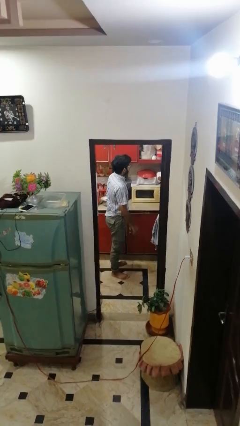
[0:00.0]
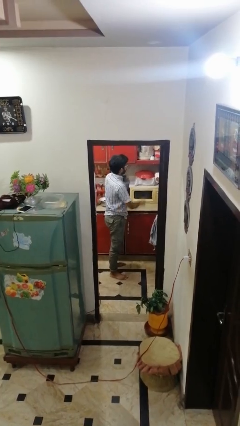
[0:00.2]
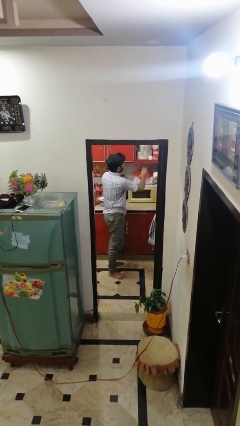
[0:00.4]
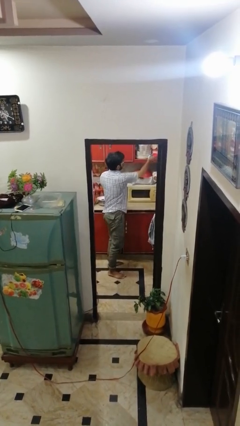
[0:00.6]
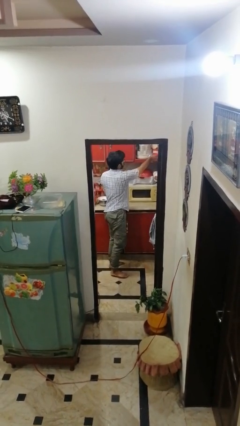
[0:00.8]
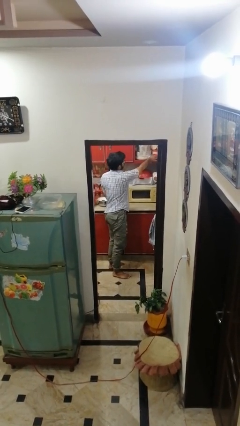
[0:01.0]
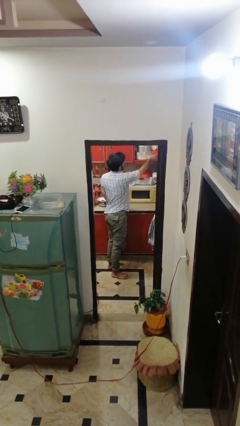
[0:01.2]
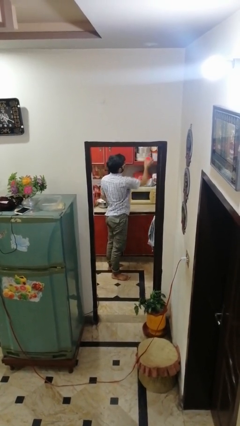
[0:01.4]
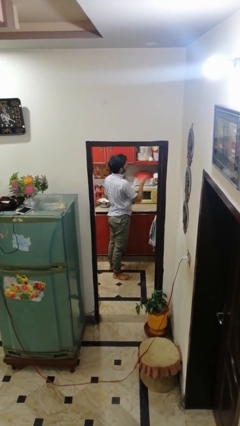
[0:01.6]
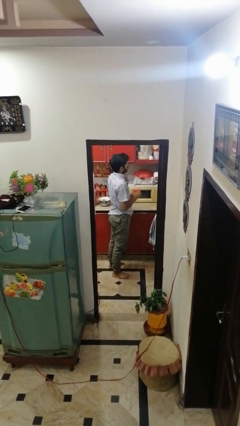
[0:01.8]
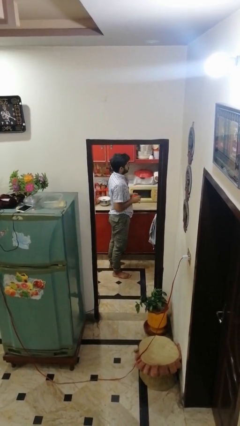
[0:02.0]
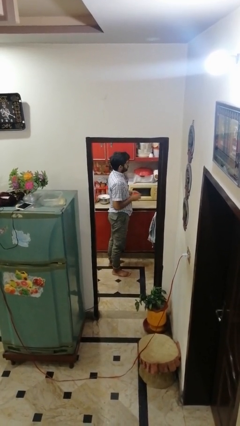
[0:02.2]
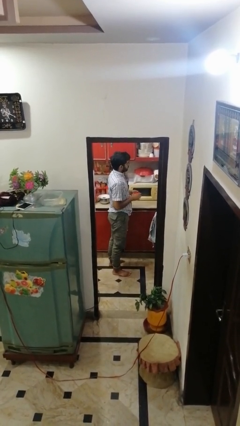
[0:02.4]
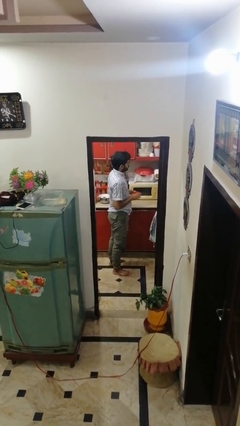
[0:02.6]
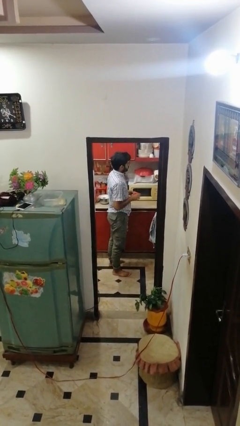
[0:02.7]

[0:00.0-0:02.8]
person picks up object from cabinet

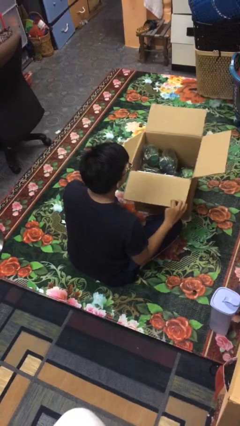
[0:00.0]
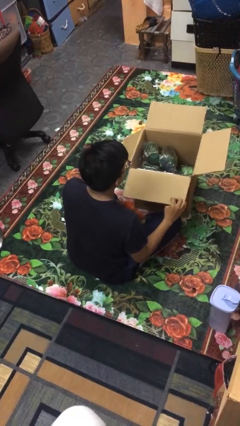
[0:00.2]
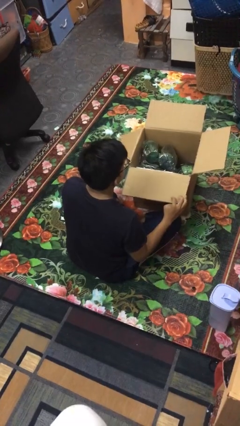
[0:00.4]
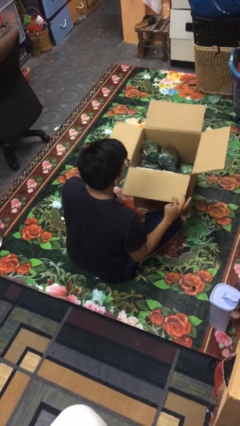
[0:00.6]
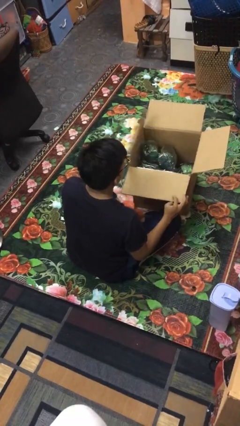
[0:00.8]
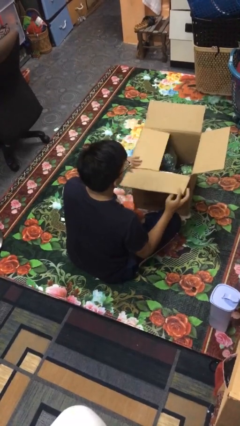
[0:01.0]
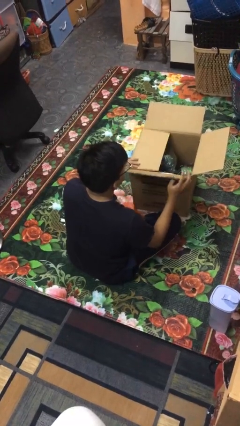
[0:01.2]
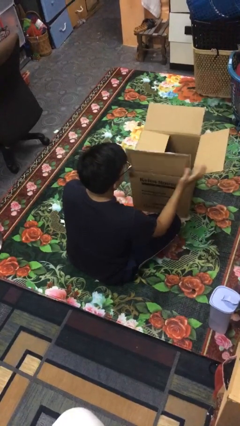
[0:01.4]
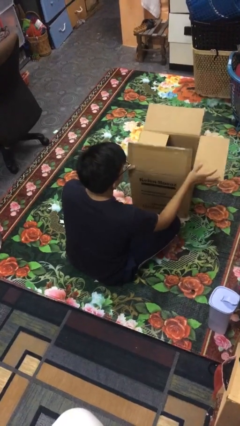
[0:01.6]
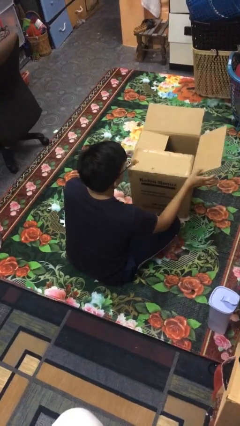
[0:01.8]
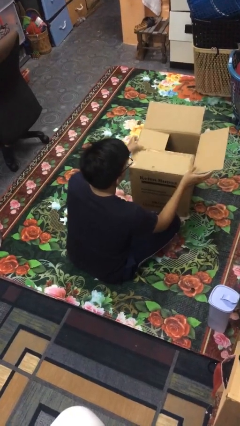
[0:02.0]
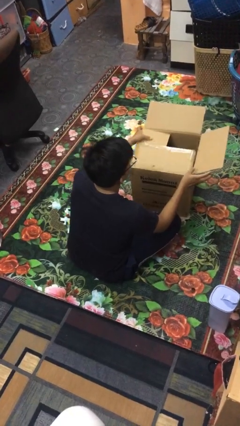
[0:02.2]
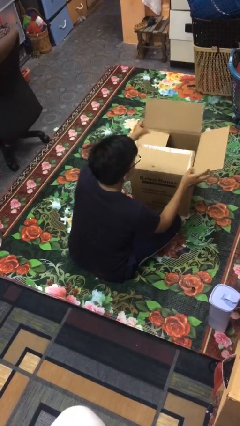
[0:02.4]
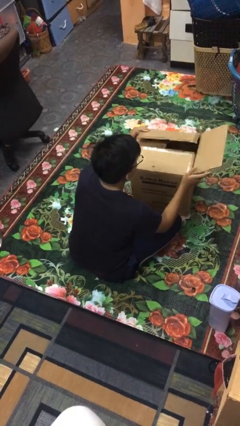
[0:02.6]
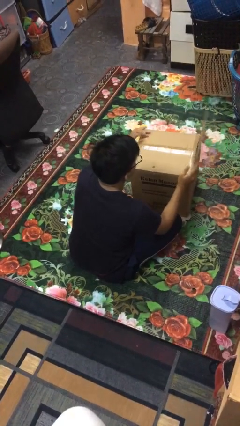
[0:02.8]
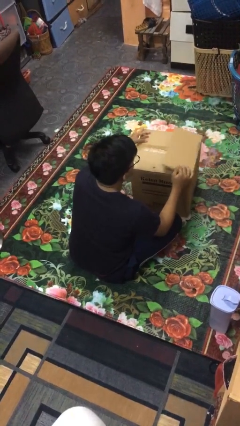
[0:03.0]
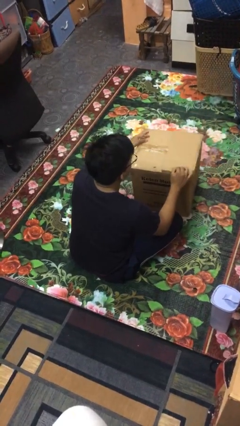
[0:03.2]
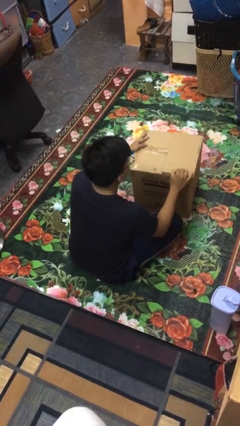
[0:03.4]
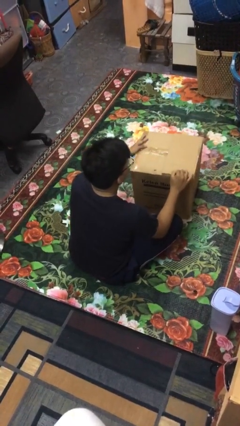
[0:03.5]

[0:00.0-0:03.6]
person closes box

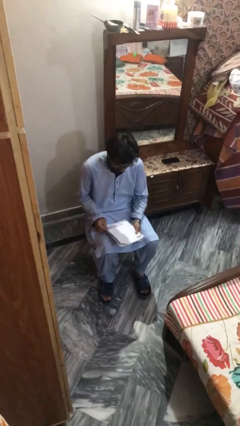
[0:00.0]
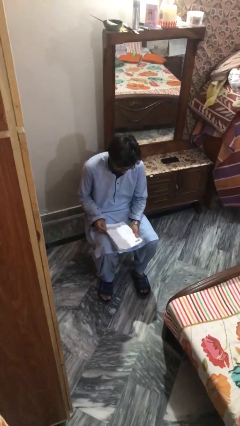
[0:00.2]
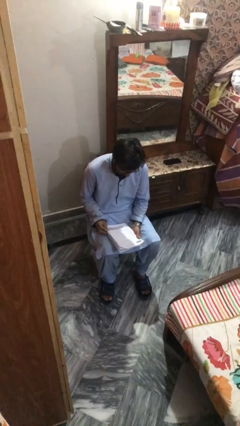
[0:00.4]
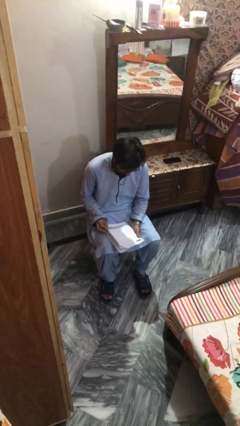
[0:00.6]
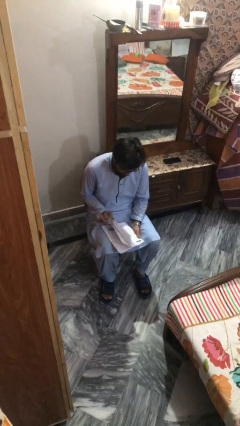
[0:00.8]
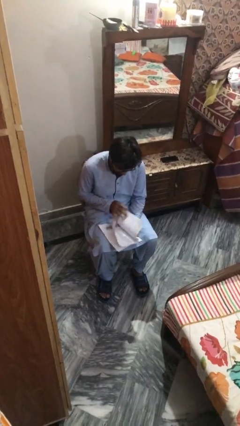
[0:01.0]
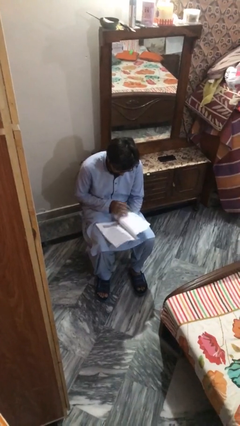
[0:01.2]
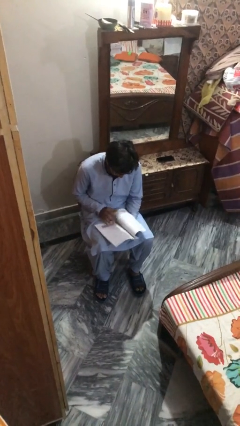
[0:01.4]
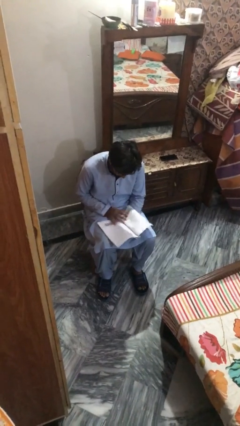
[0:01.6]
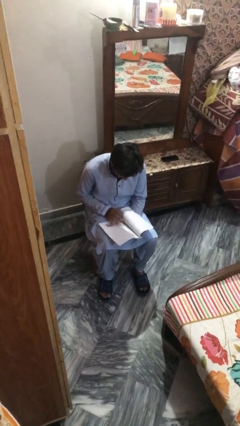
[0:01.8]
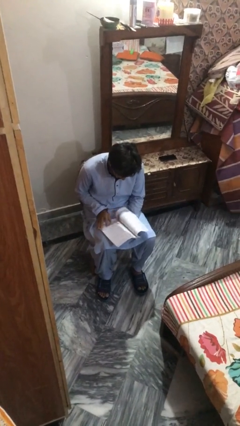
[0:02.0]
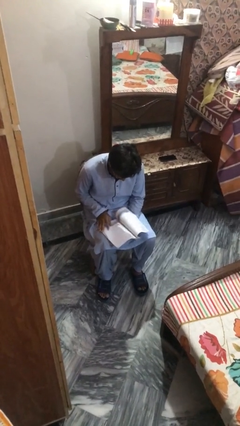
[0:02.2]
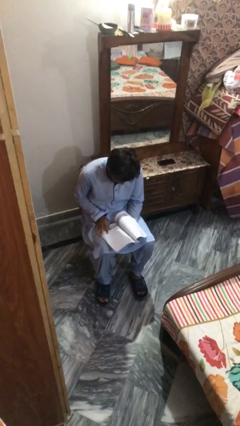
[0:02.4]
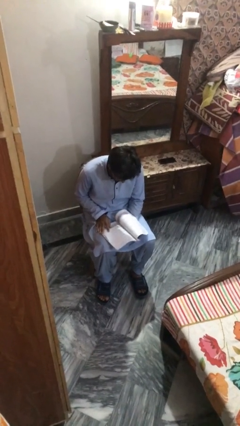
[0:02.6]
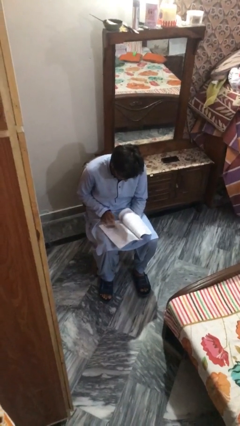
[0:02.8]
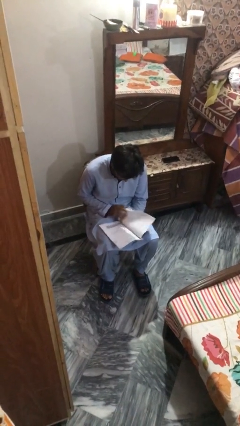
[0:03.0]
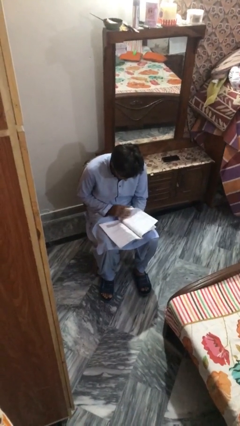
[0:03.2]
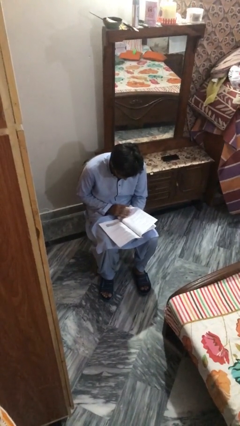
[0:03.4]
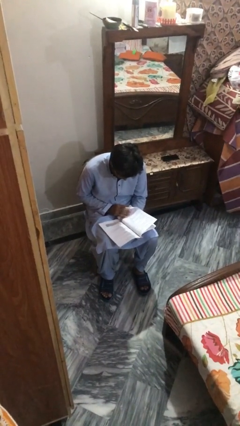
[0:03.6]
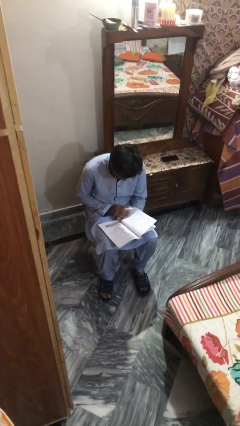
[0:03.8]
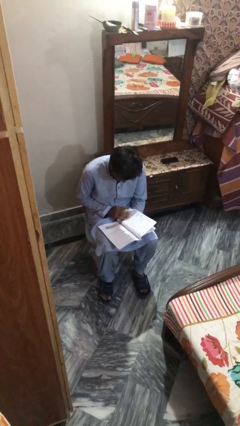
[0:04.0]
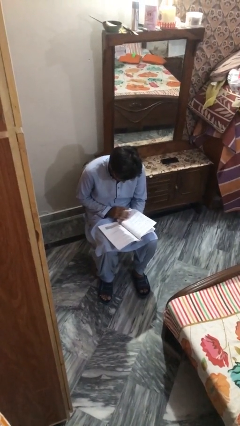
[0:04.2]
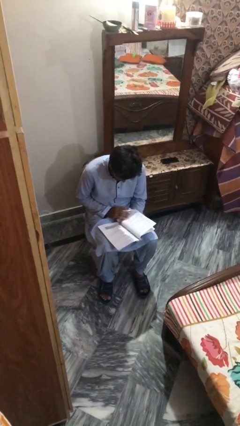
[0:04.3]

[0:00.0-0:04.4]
person reads document

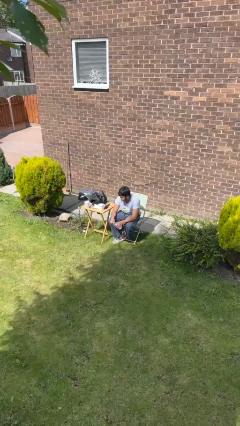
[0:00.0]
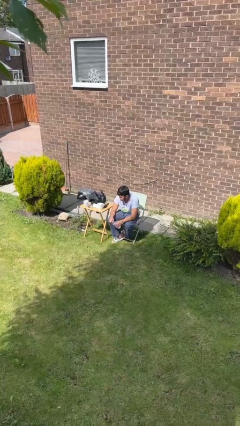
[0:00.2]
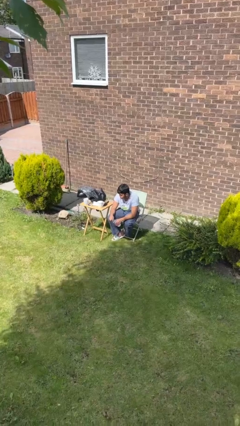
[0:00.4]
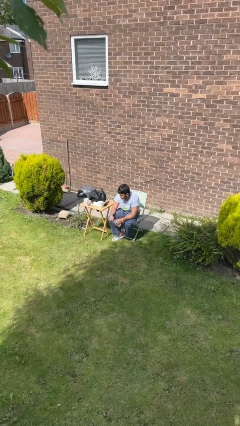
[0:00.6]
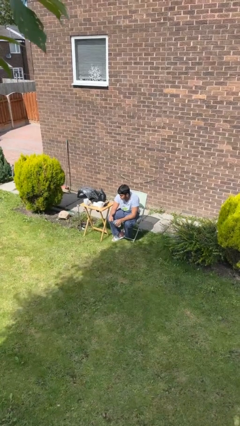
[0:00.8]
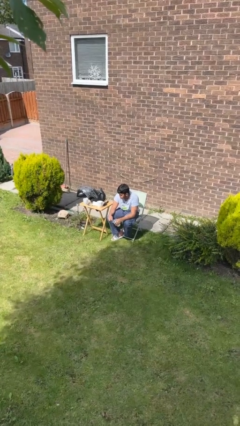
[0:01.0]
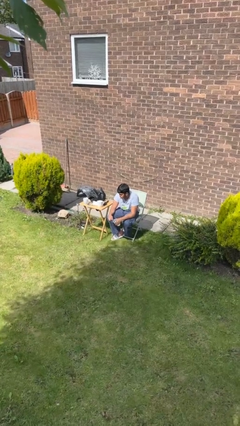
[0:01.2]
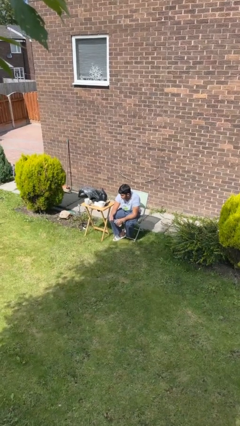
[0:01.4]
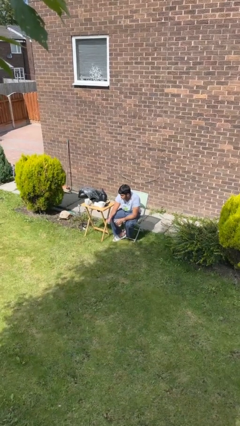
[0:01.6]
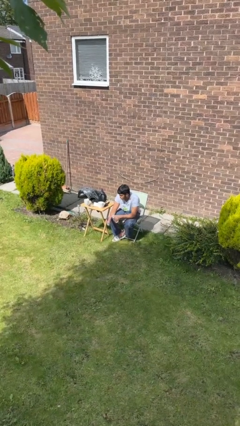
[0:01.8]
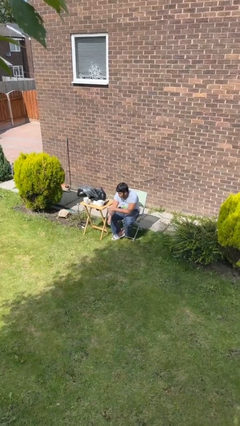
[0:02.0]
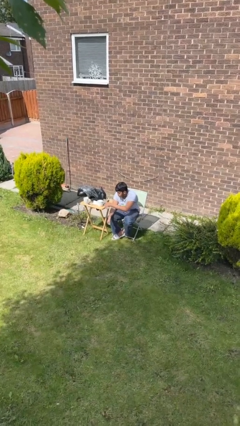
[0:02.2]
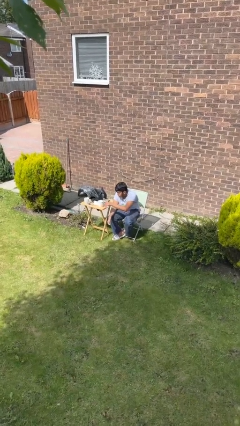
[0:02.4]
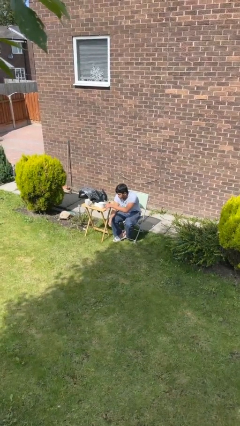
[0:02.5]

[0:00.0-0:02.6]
person unscrews lid from bottle

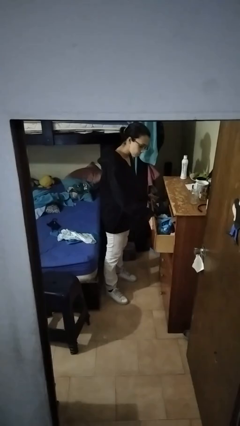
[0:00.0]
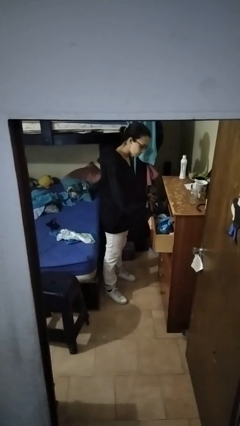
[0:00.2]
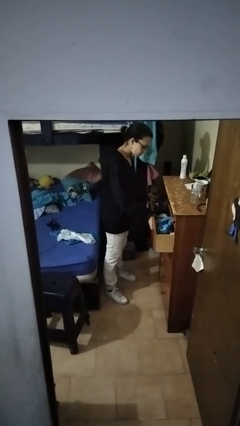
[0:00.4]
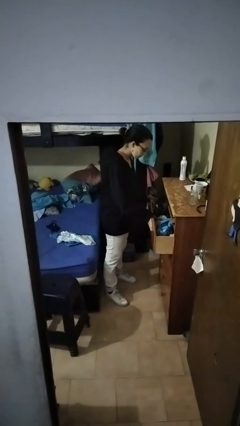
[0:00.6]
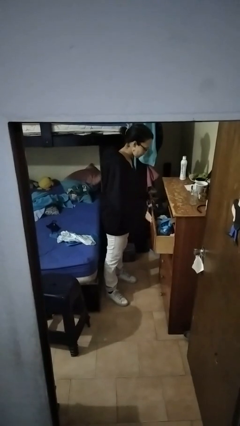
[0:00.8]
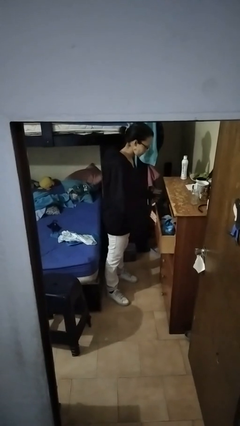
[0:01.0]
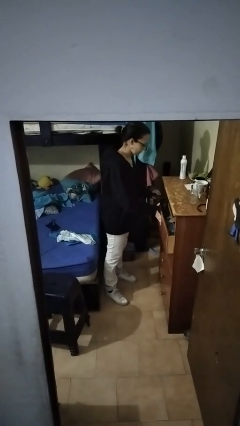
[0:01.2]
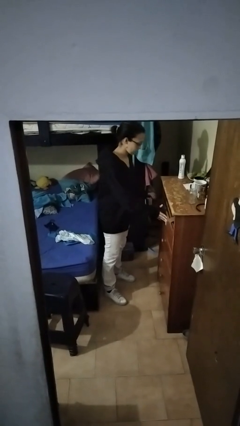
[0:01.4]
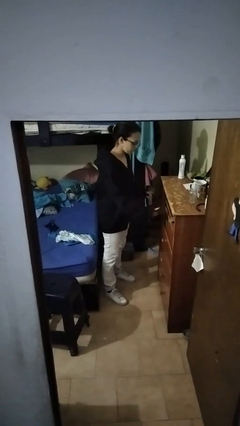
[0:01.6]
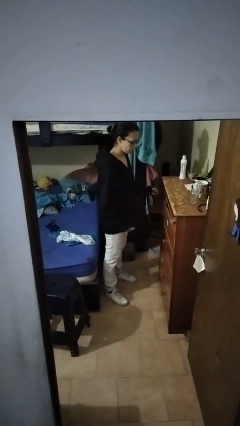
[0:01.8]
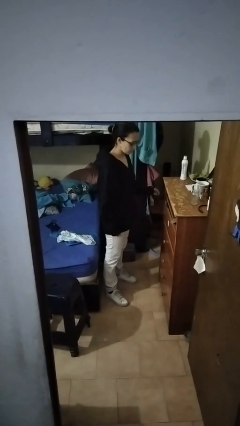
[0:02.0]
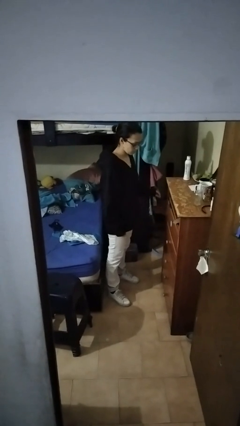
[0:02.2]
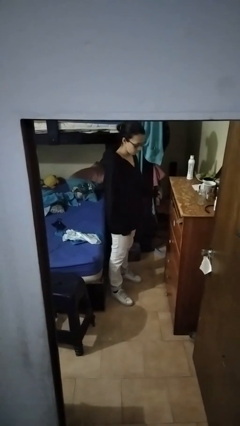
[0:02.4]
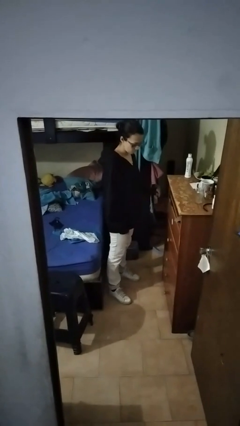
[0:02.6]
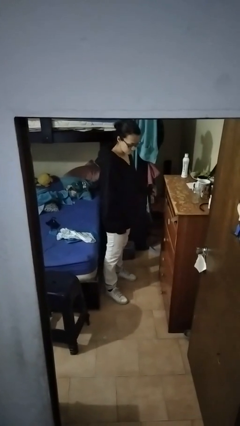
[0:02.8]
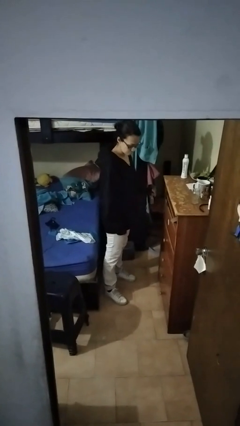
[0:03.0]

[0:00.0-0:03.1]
person closes dresser drawer

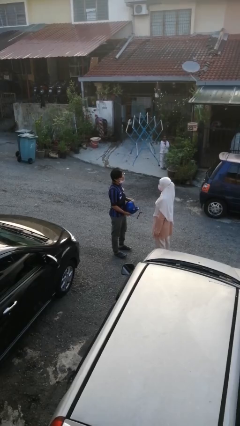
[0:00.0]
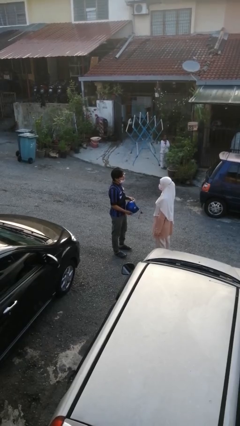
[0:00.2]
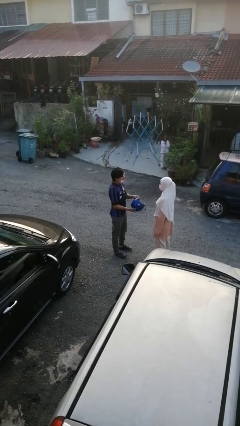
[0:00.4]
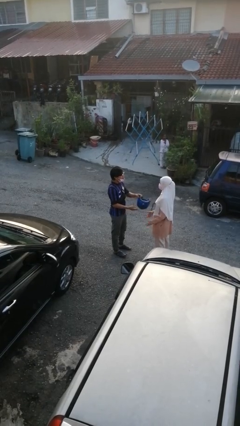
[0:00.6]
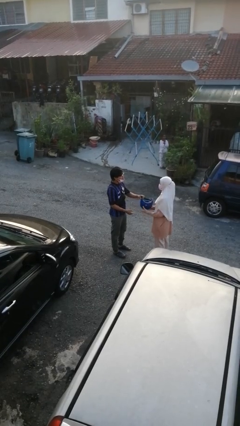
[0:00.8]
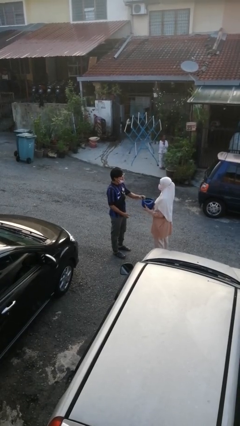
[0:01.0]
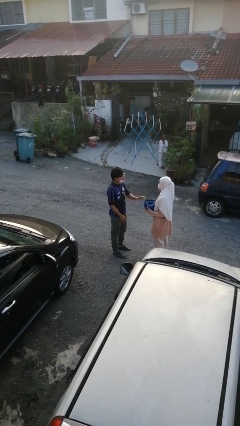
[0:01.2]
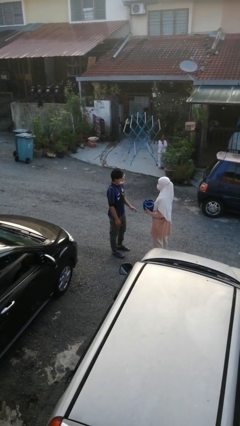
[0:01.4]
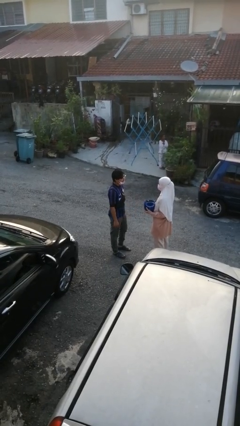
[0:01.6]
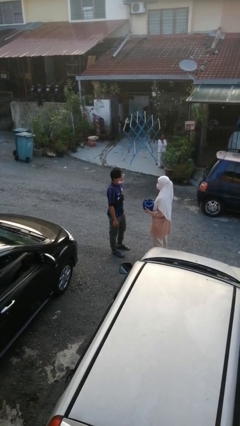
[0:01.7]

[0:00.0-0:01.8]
person transfers object to person
